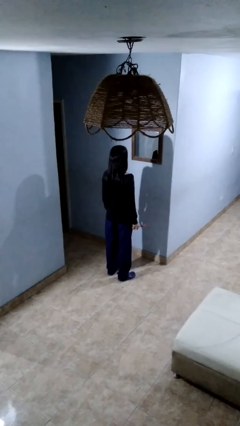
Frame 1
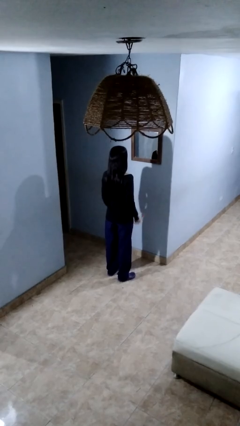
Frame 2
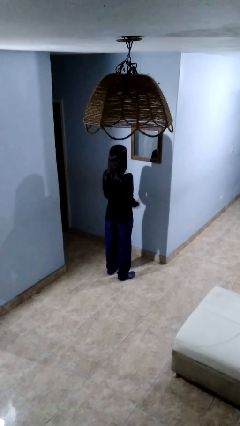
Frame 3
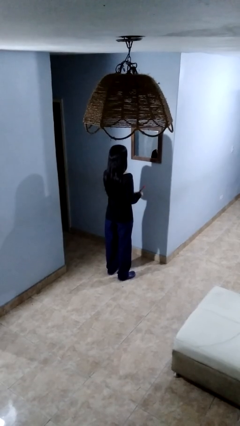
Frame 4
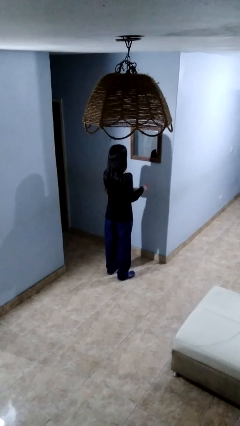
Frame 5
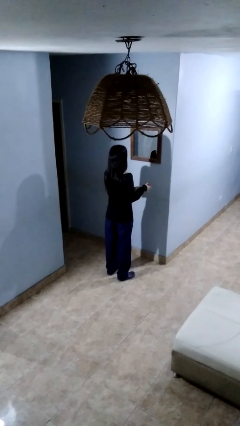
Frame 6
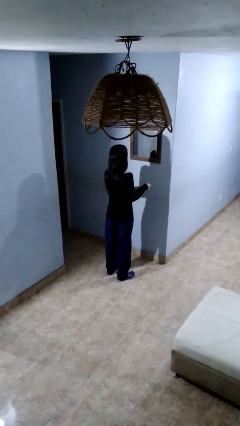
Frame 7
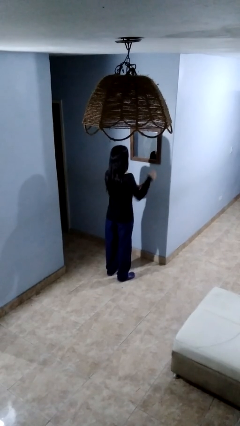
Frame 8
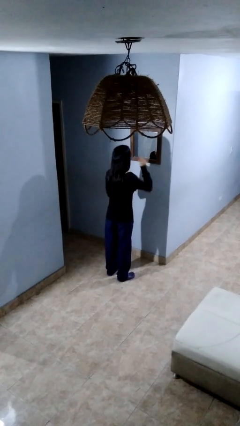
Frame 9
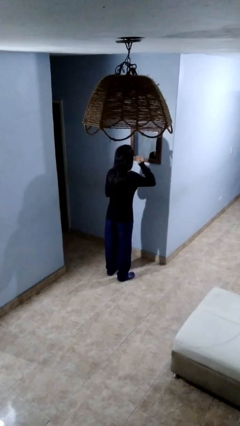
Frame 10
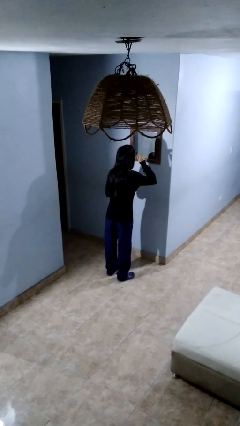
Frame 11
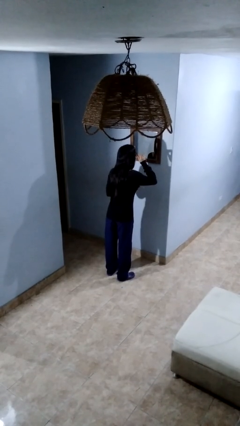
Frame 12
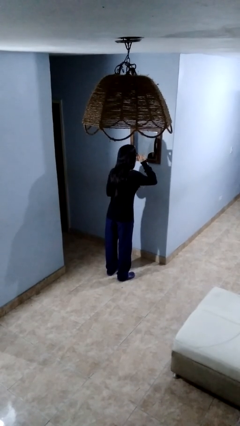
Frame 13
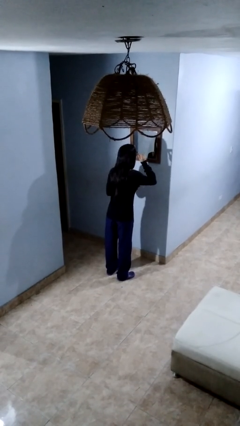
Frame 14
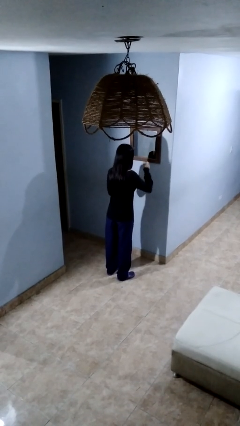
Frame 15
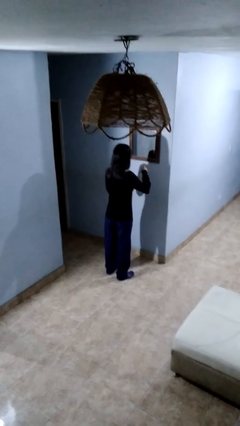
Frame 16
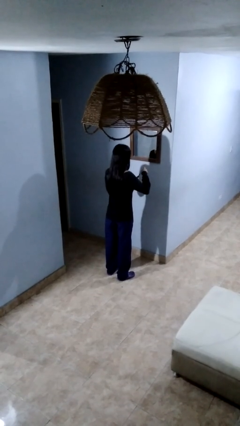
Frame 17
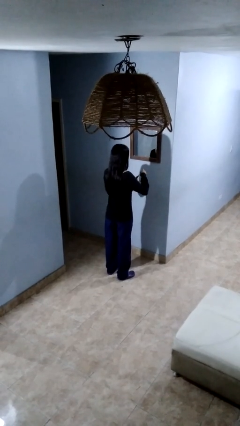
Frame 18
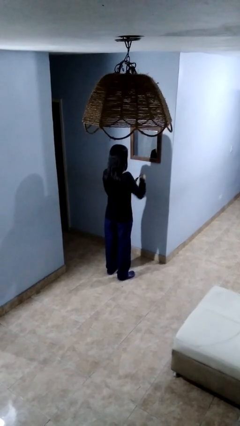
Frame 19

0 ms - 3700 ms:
person applies eye makeup

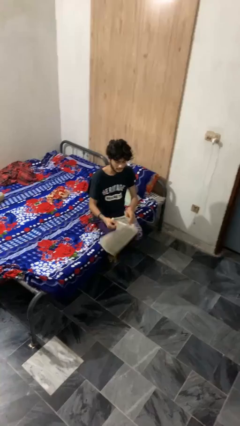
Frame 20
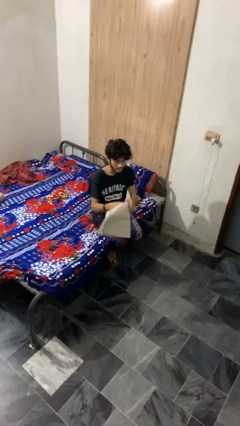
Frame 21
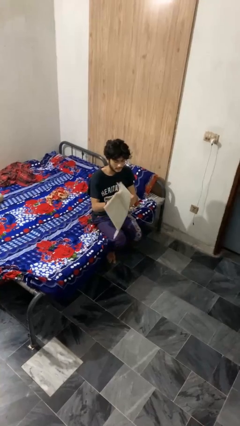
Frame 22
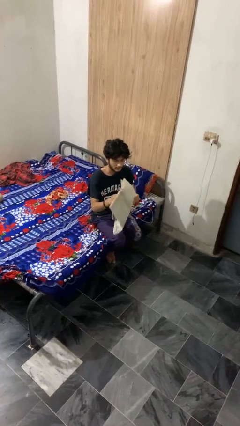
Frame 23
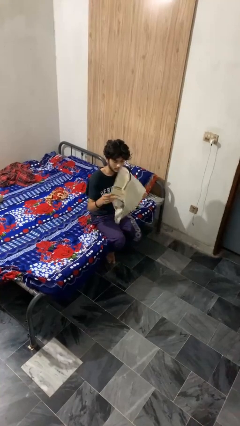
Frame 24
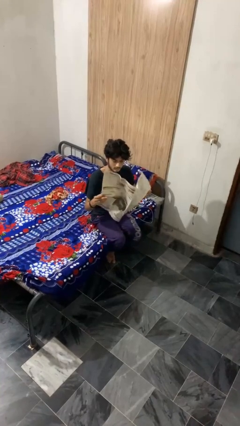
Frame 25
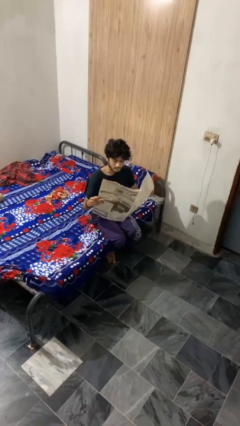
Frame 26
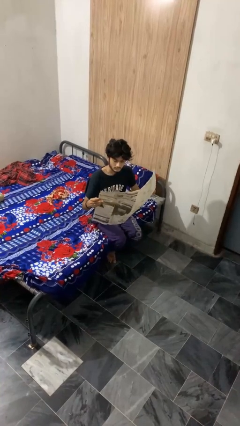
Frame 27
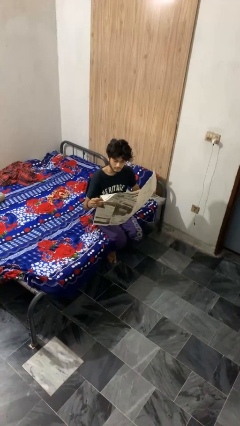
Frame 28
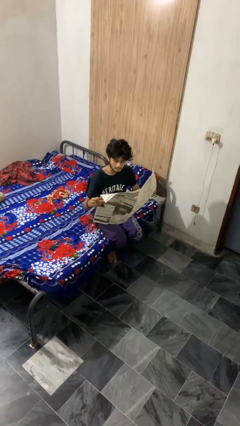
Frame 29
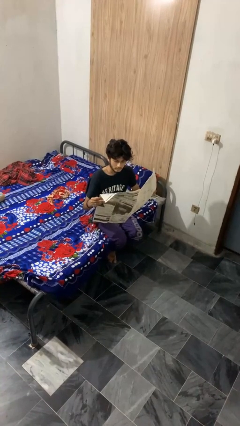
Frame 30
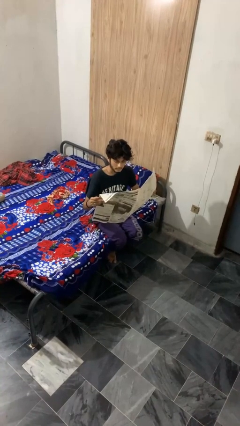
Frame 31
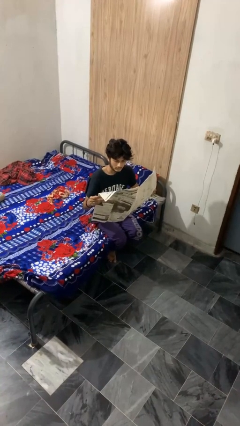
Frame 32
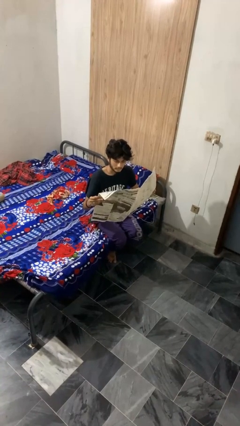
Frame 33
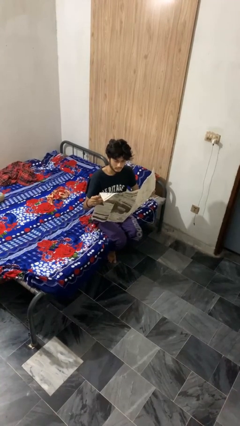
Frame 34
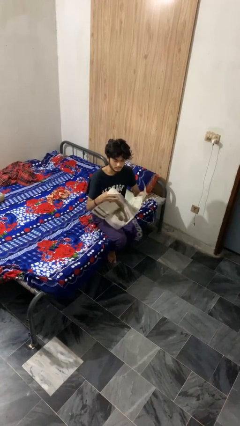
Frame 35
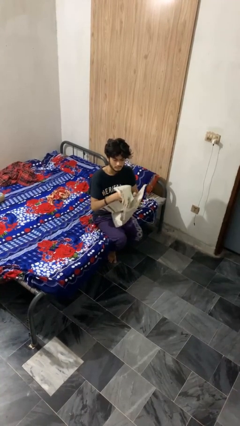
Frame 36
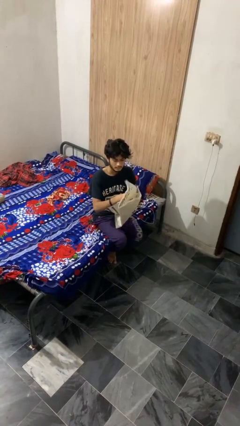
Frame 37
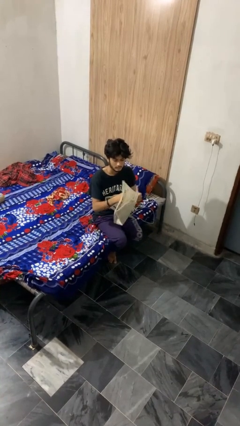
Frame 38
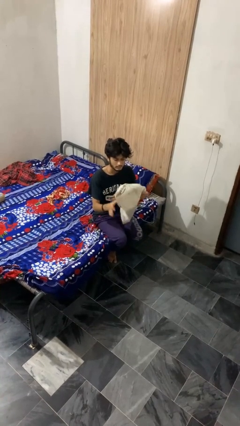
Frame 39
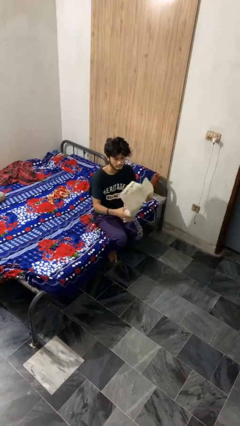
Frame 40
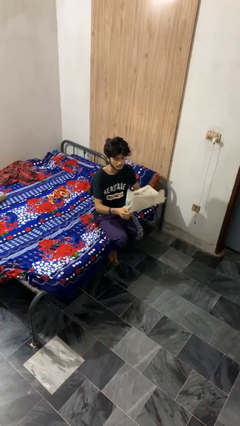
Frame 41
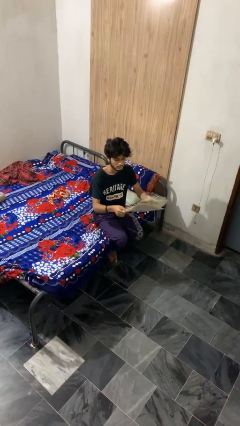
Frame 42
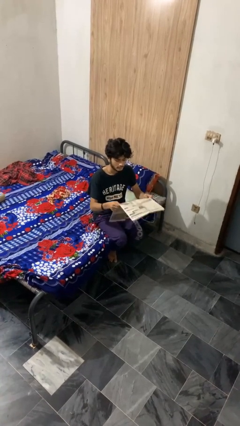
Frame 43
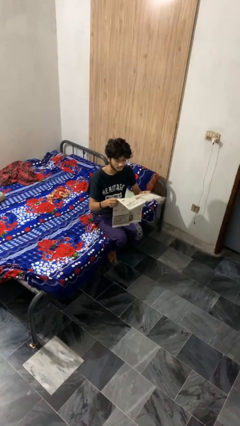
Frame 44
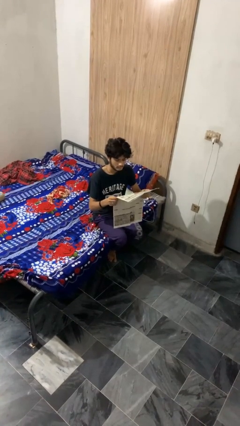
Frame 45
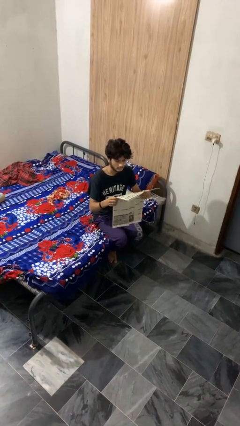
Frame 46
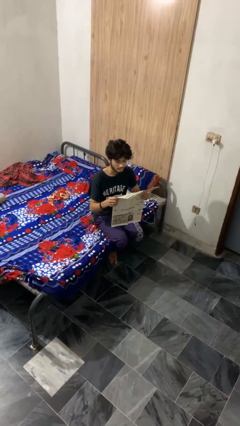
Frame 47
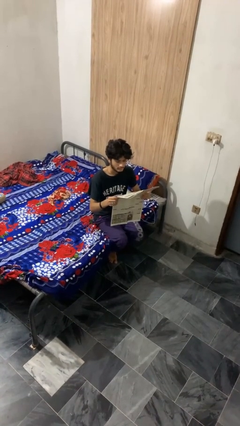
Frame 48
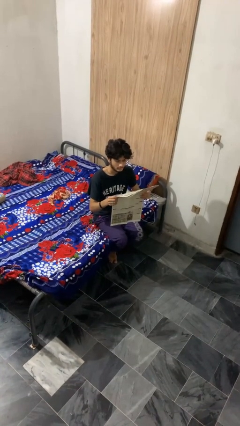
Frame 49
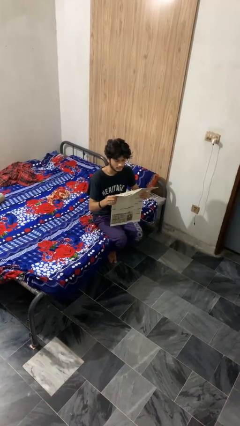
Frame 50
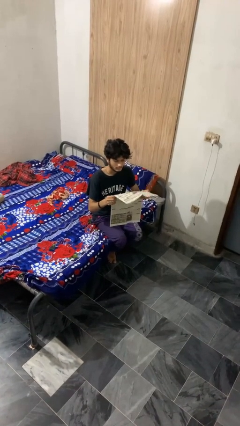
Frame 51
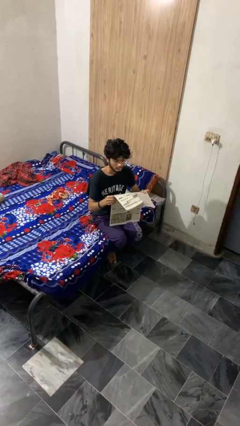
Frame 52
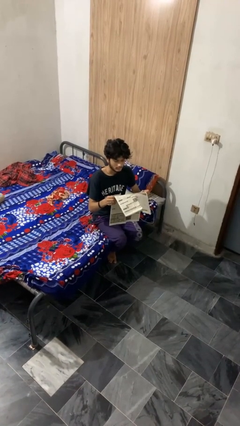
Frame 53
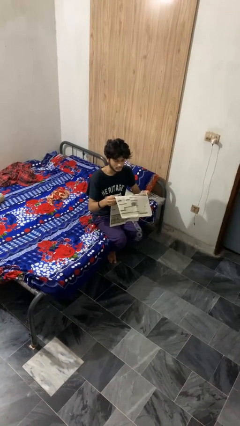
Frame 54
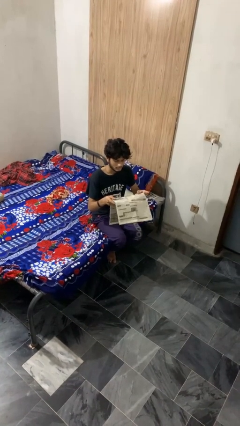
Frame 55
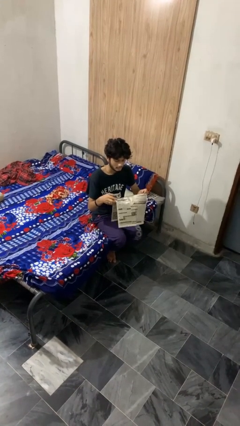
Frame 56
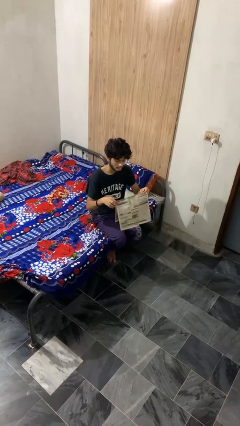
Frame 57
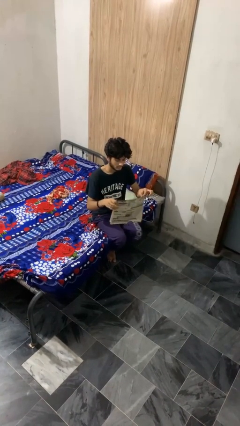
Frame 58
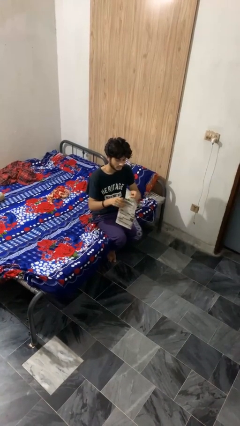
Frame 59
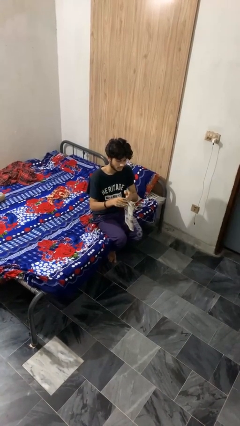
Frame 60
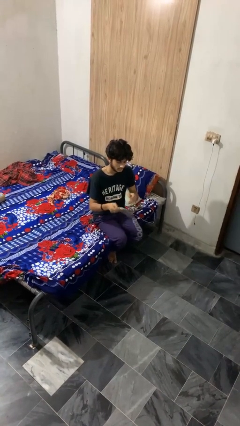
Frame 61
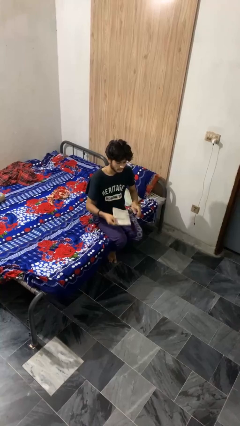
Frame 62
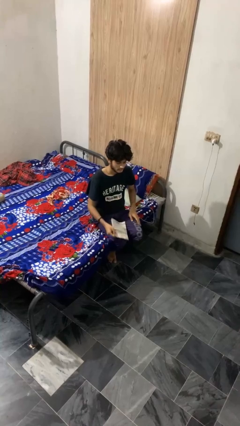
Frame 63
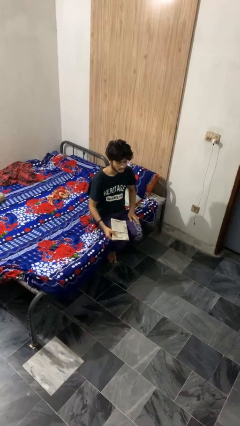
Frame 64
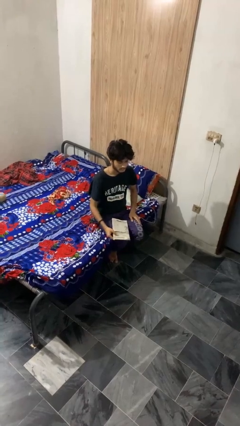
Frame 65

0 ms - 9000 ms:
person reads newspaper

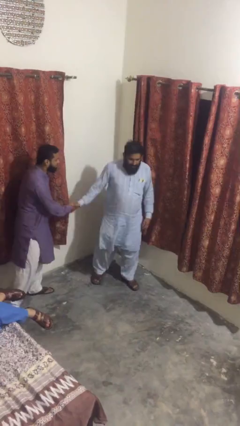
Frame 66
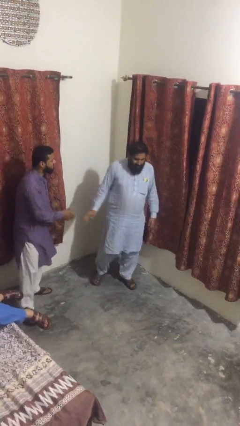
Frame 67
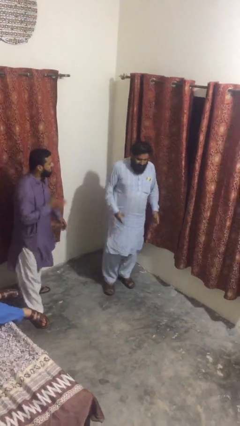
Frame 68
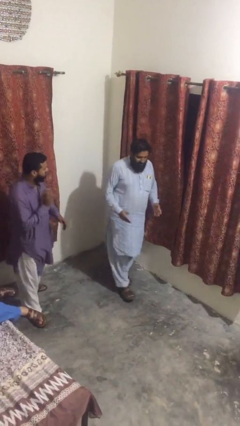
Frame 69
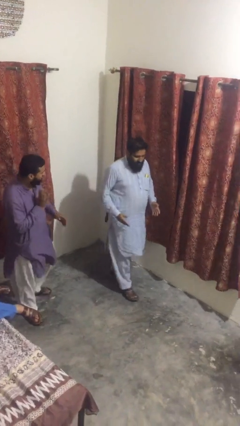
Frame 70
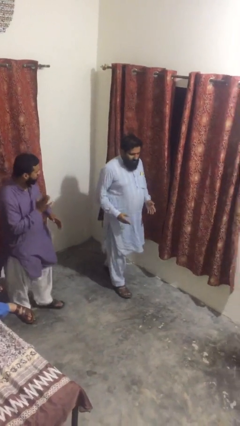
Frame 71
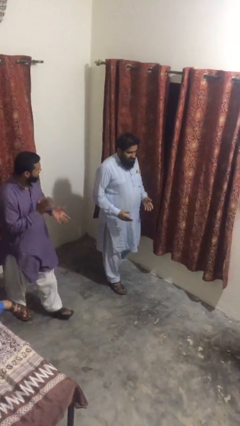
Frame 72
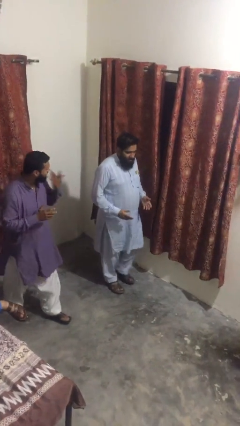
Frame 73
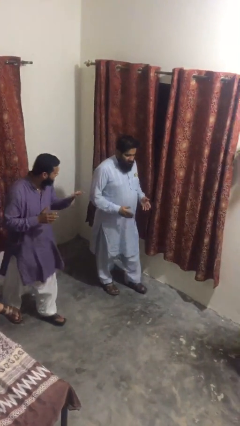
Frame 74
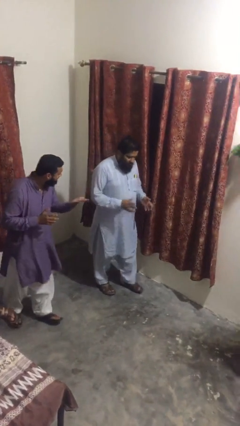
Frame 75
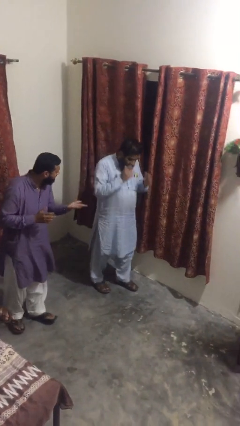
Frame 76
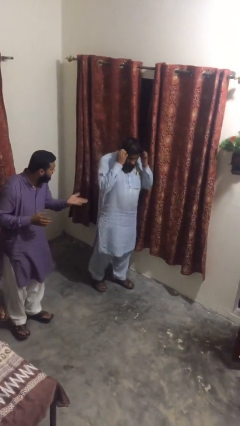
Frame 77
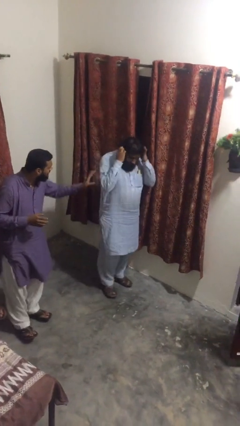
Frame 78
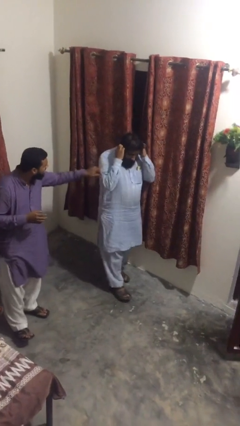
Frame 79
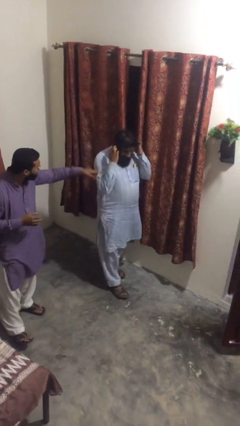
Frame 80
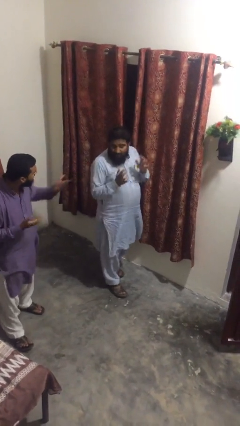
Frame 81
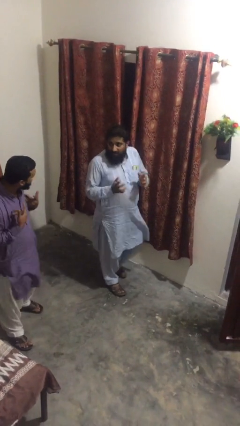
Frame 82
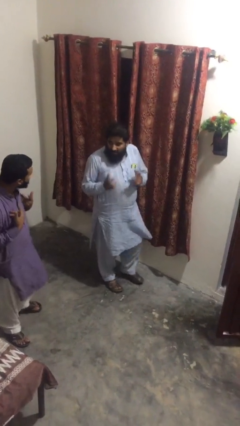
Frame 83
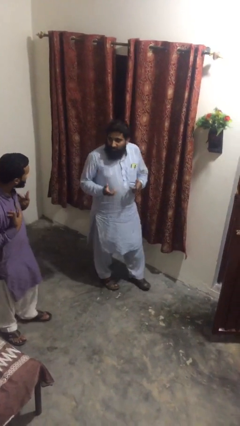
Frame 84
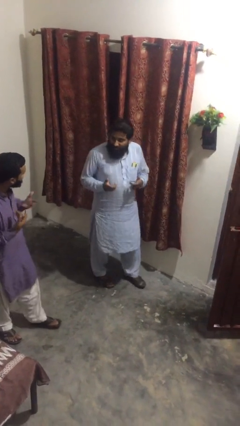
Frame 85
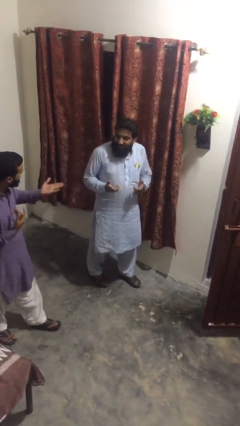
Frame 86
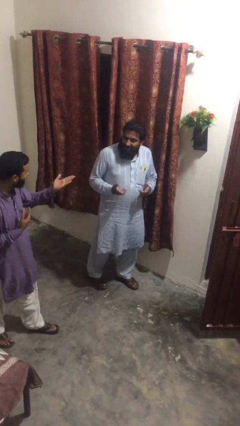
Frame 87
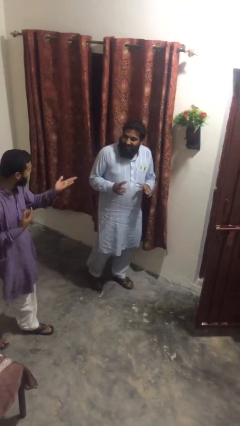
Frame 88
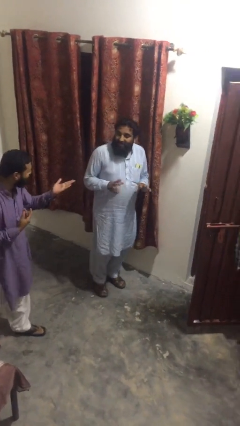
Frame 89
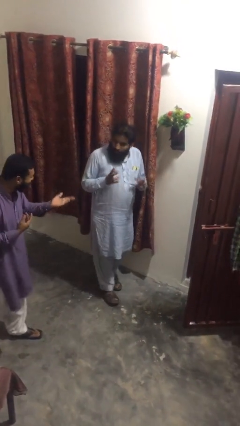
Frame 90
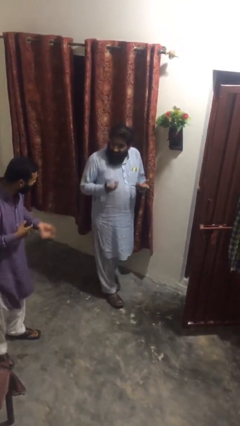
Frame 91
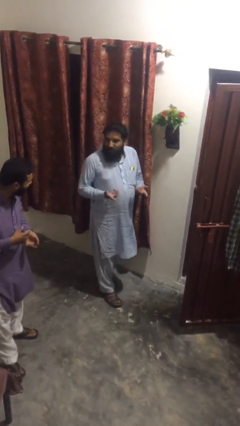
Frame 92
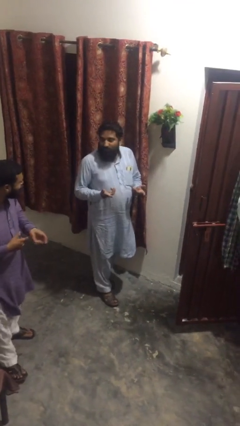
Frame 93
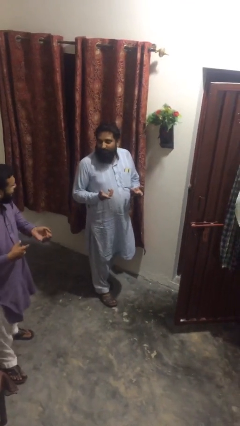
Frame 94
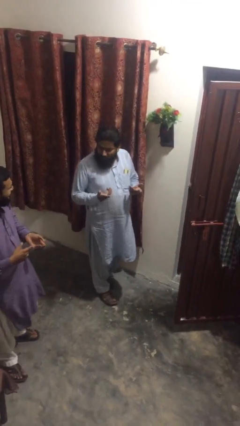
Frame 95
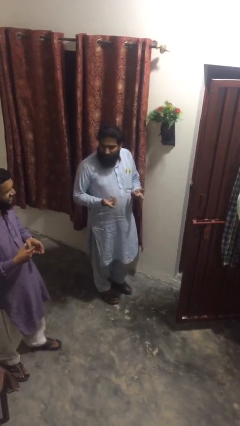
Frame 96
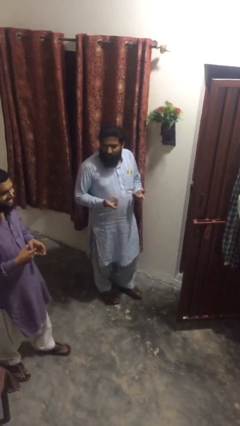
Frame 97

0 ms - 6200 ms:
person talks to person
